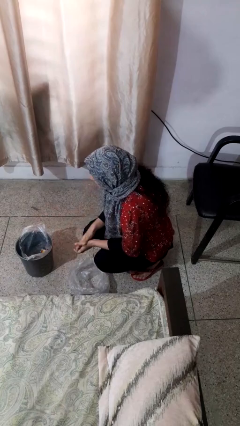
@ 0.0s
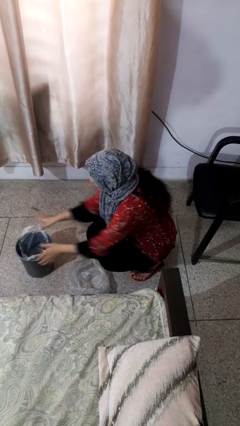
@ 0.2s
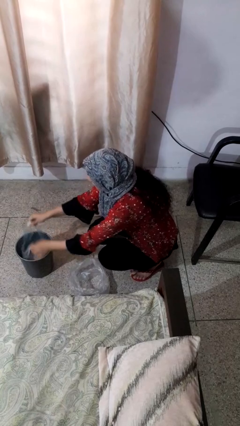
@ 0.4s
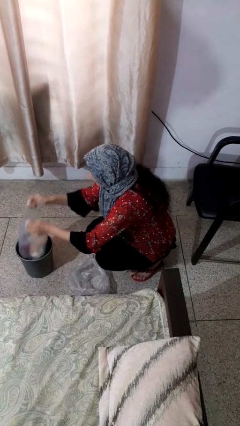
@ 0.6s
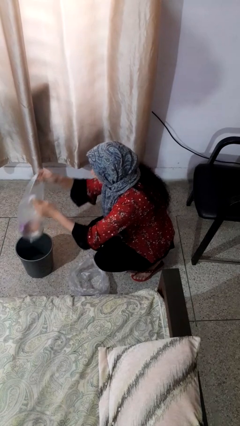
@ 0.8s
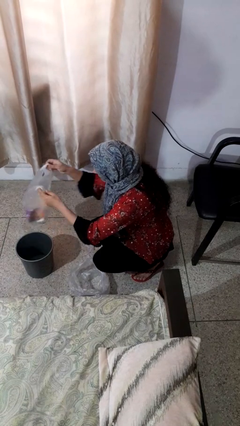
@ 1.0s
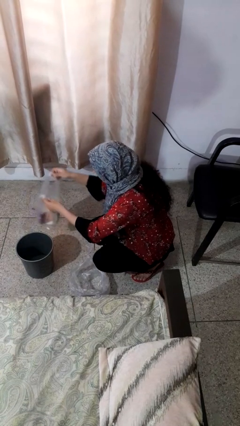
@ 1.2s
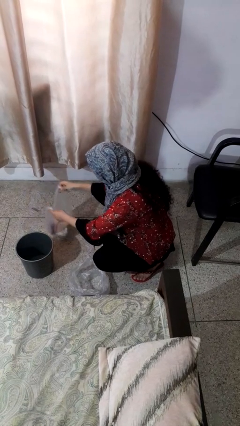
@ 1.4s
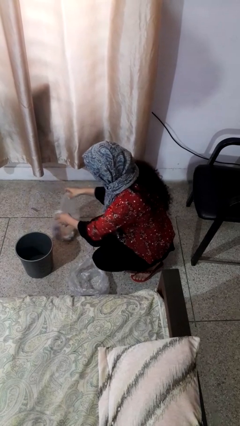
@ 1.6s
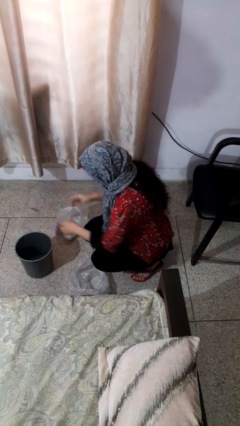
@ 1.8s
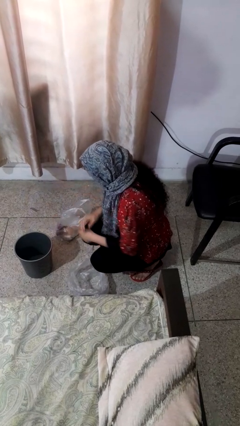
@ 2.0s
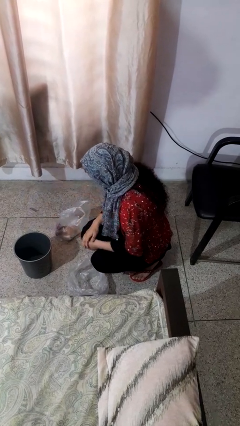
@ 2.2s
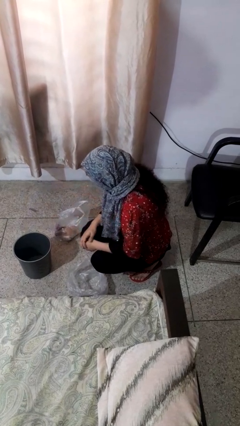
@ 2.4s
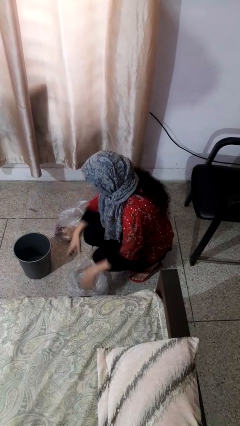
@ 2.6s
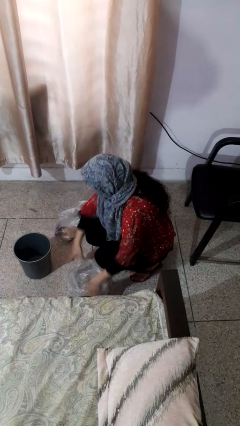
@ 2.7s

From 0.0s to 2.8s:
person removes trashbag from trashcan

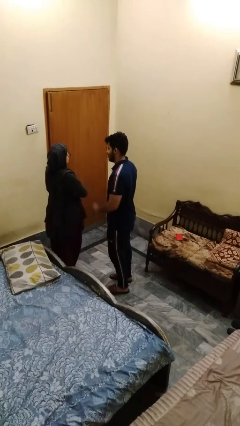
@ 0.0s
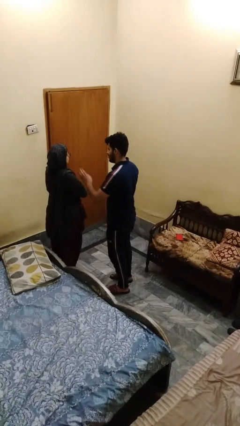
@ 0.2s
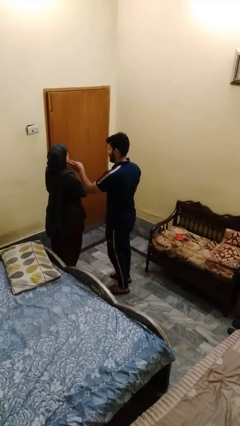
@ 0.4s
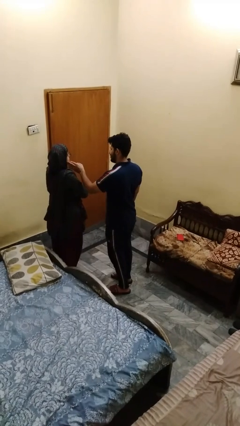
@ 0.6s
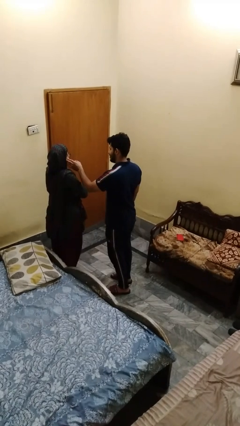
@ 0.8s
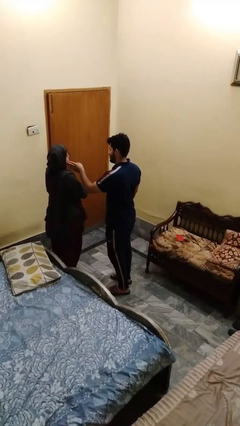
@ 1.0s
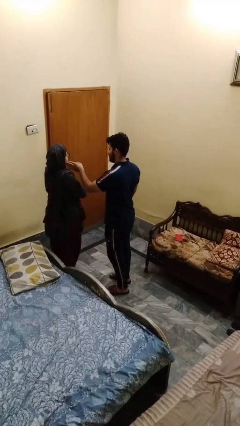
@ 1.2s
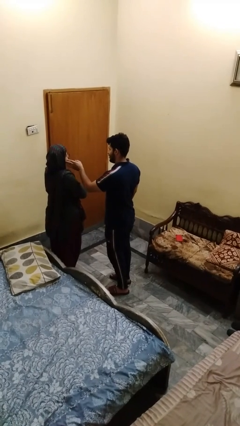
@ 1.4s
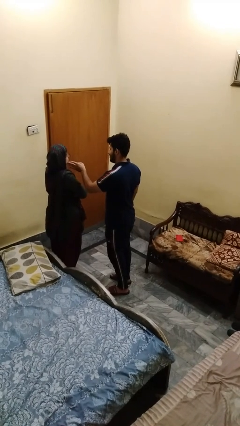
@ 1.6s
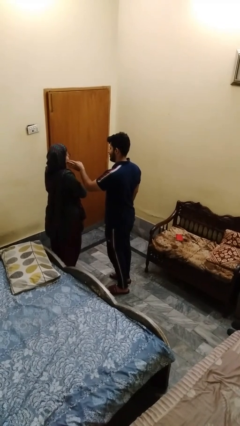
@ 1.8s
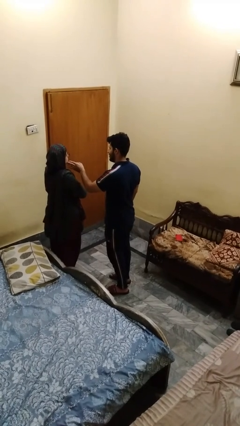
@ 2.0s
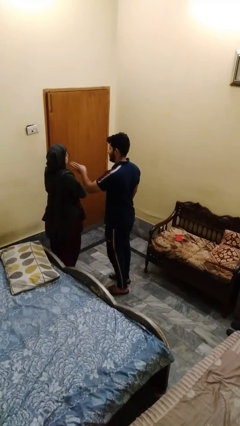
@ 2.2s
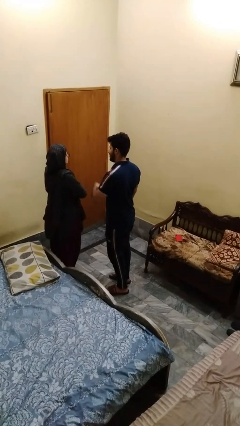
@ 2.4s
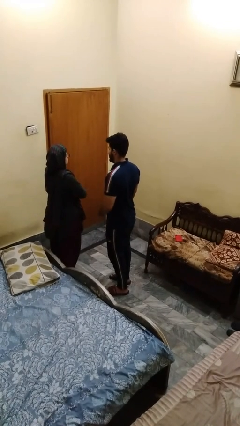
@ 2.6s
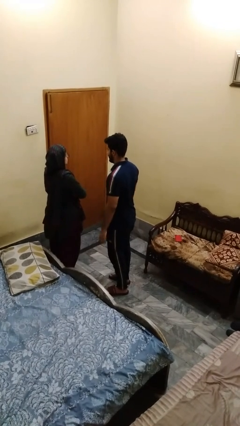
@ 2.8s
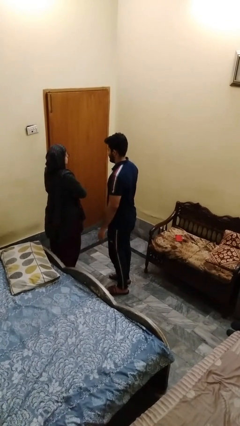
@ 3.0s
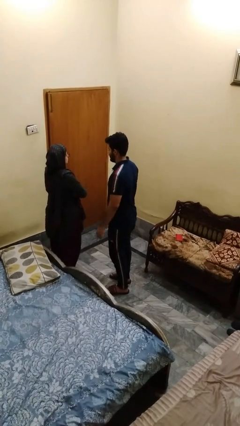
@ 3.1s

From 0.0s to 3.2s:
person touches face of person

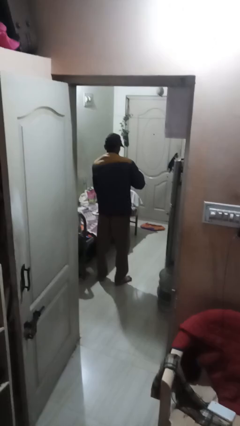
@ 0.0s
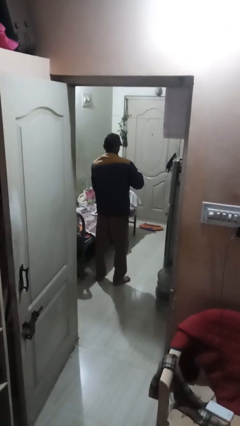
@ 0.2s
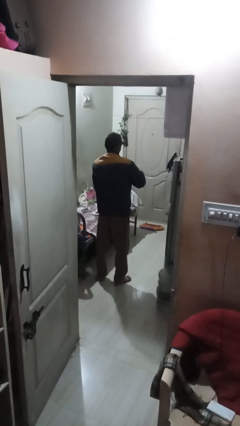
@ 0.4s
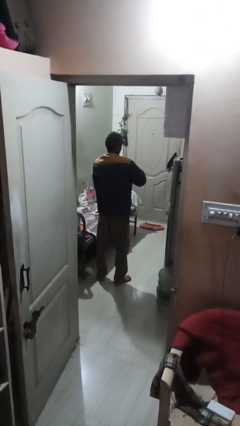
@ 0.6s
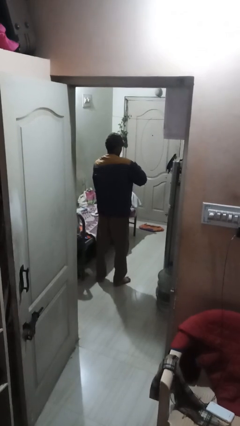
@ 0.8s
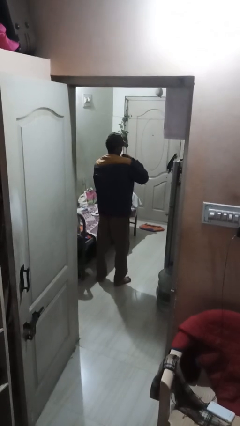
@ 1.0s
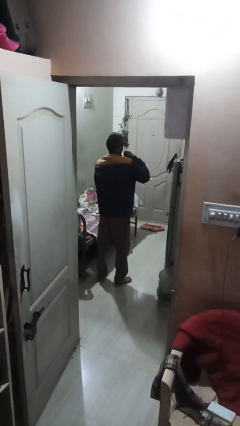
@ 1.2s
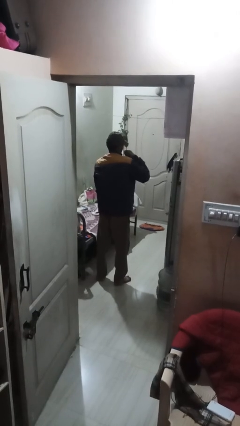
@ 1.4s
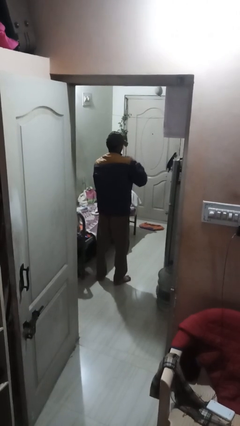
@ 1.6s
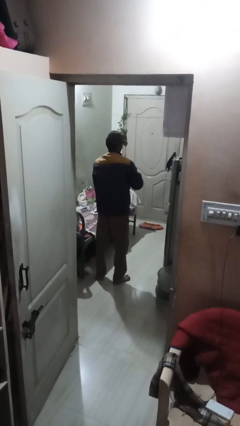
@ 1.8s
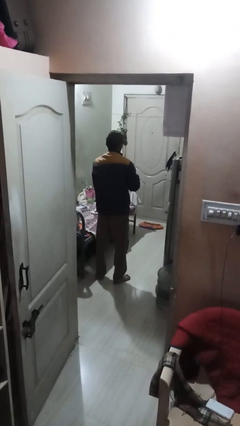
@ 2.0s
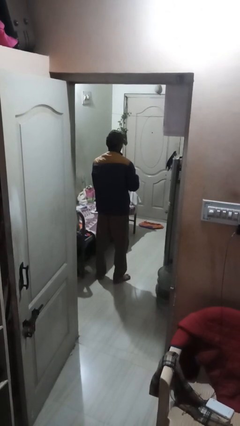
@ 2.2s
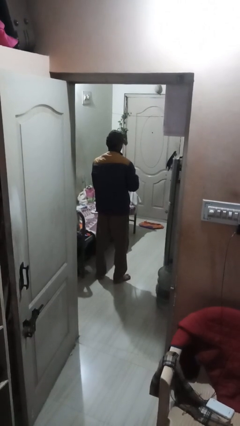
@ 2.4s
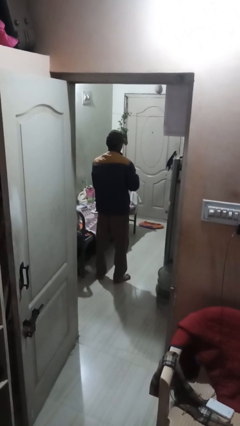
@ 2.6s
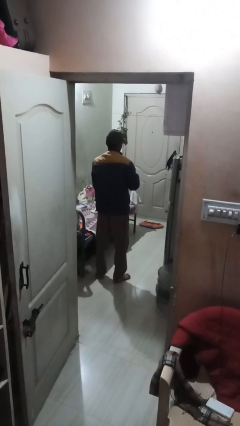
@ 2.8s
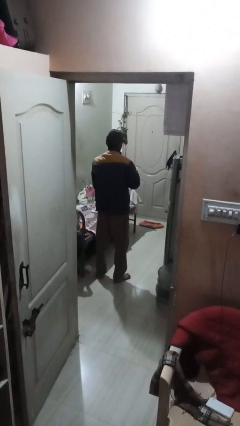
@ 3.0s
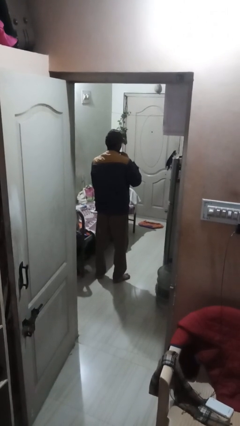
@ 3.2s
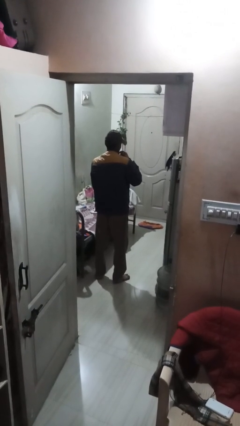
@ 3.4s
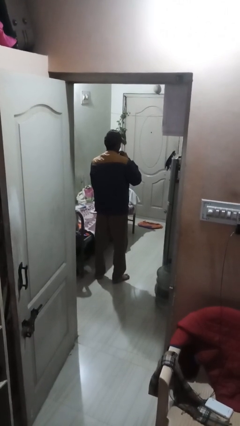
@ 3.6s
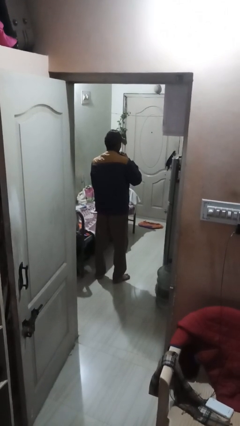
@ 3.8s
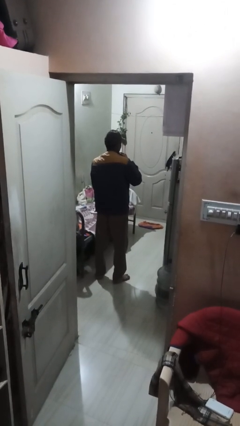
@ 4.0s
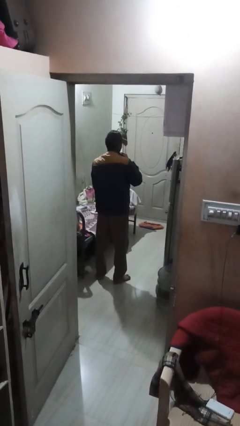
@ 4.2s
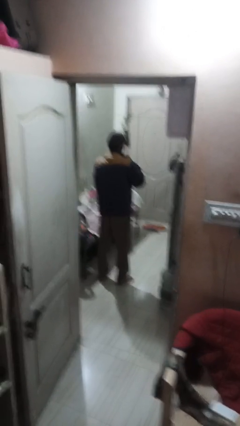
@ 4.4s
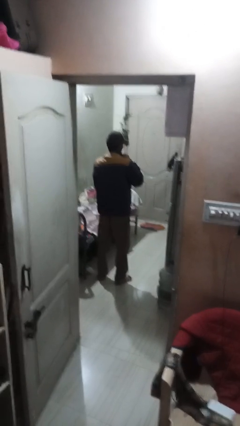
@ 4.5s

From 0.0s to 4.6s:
person zips up jacket

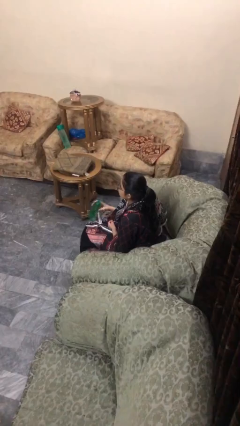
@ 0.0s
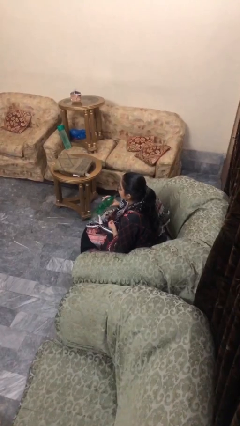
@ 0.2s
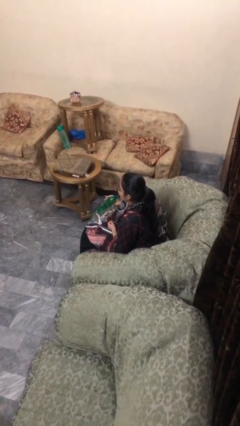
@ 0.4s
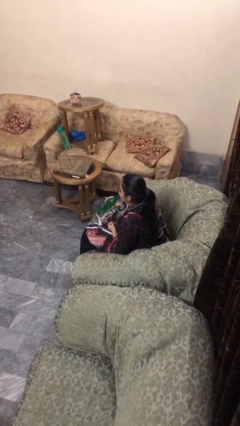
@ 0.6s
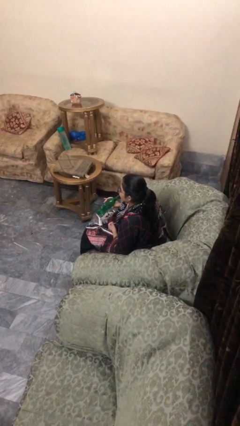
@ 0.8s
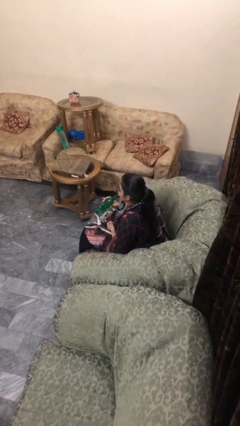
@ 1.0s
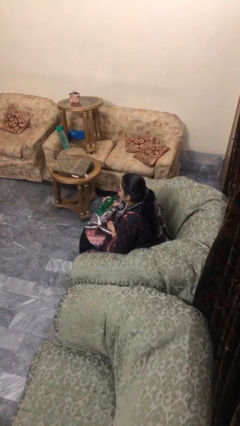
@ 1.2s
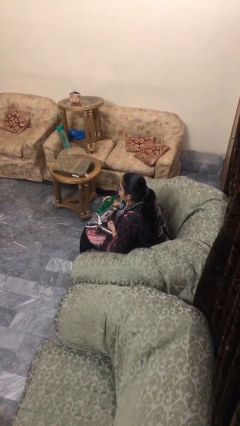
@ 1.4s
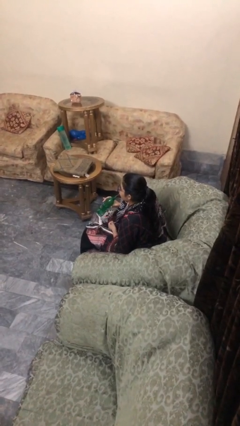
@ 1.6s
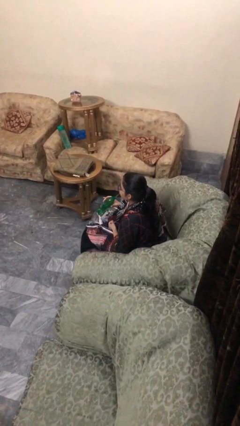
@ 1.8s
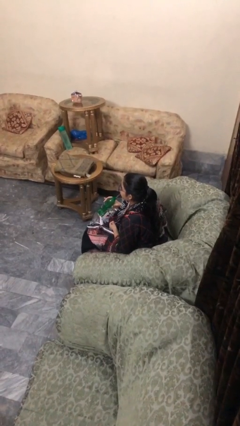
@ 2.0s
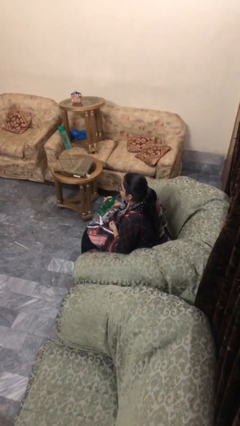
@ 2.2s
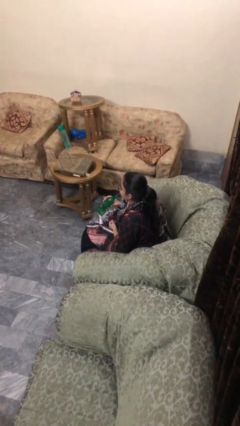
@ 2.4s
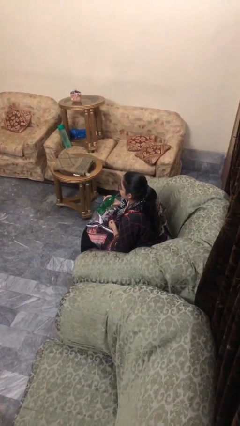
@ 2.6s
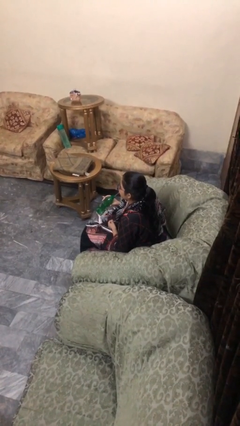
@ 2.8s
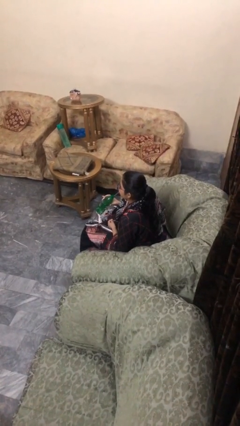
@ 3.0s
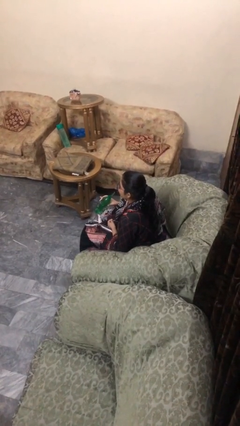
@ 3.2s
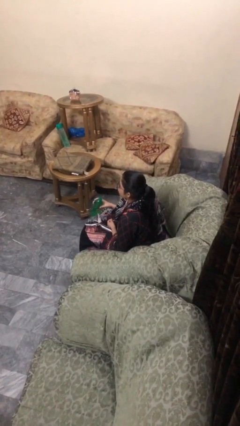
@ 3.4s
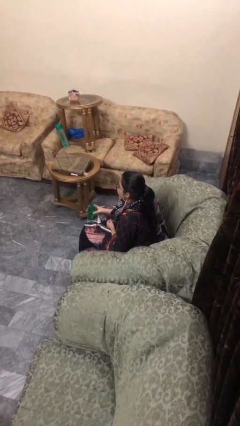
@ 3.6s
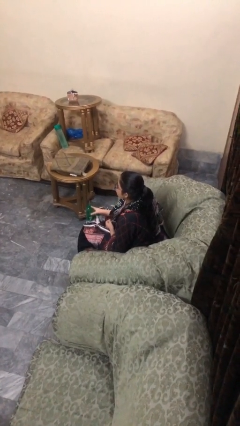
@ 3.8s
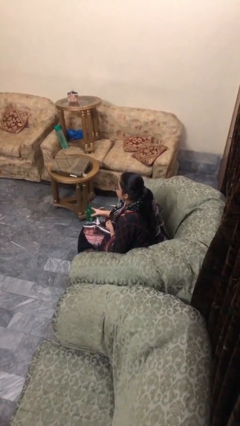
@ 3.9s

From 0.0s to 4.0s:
person drinks from straw

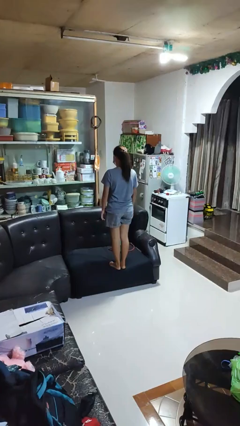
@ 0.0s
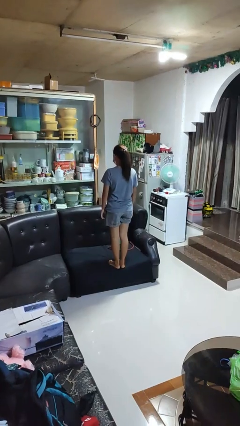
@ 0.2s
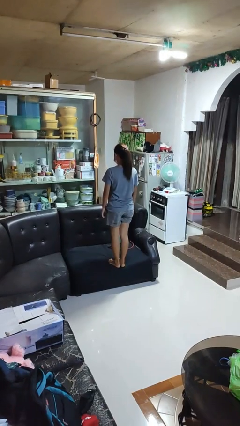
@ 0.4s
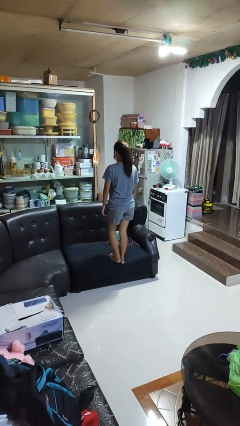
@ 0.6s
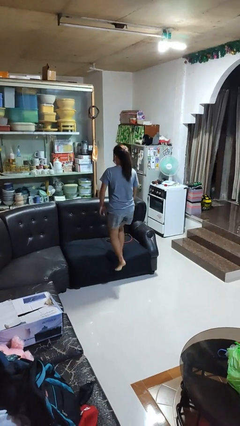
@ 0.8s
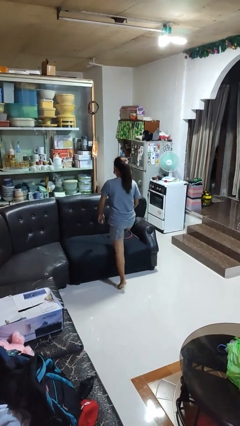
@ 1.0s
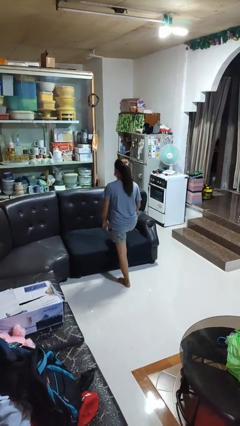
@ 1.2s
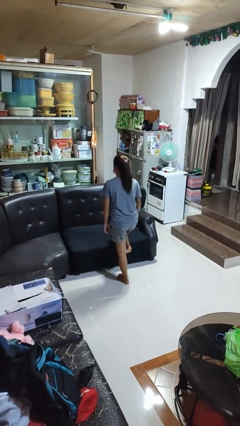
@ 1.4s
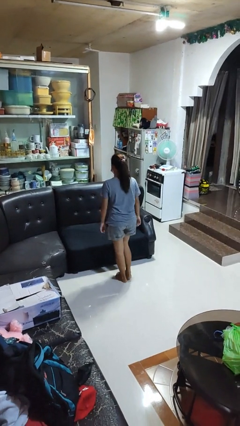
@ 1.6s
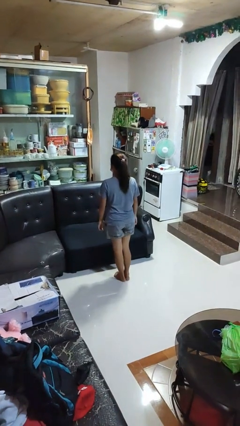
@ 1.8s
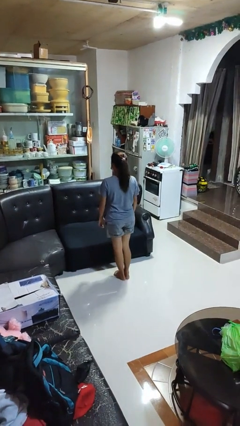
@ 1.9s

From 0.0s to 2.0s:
person climbs off couch

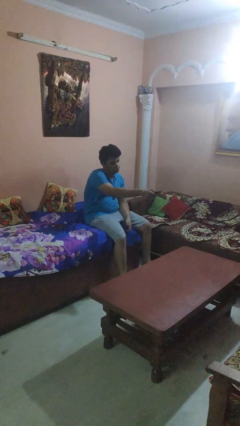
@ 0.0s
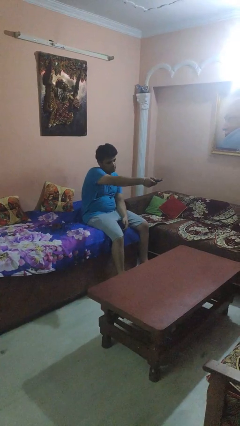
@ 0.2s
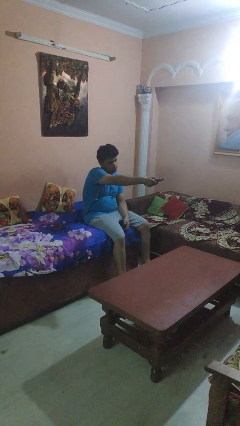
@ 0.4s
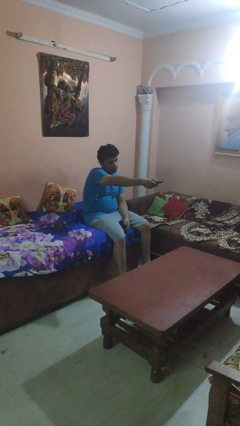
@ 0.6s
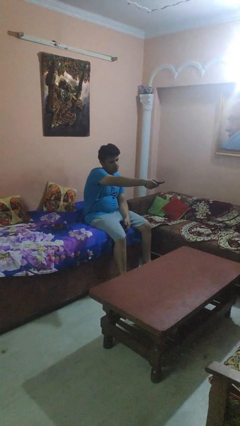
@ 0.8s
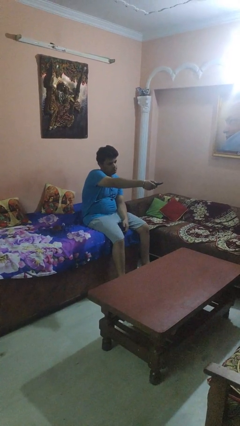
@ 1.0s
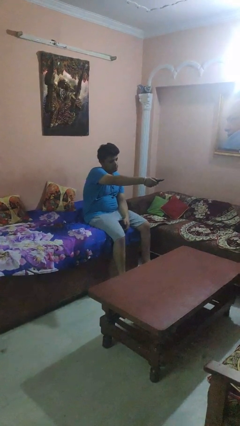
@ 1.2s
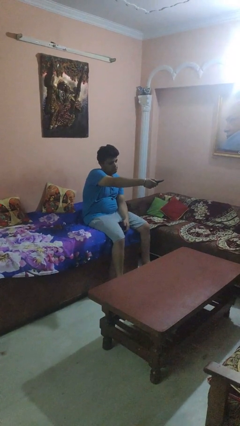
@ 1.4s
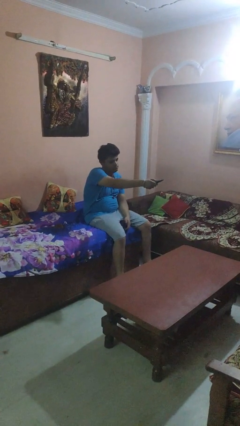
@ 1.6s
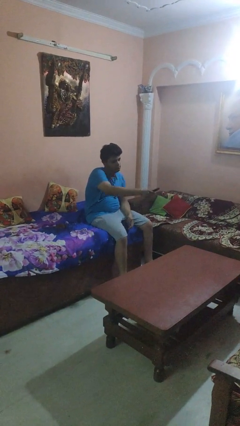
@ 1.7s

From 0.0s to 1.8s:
person uses television remote
